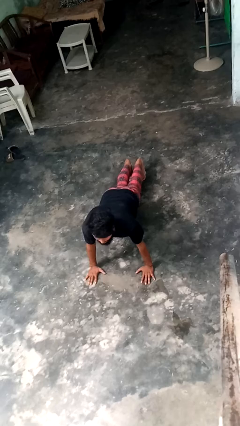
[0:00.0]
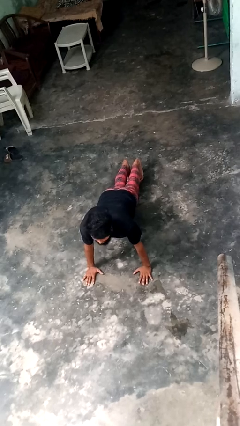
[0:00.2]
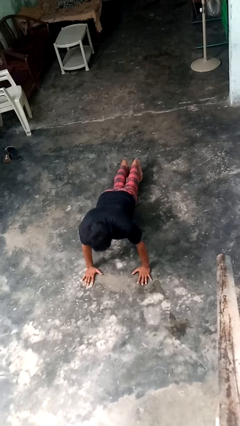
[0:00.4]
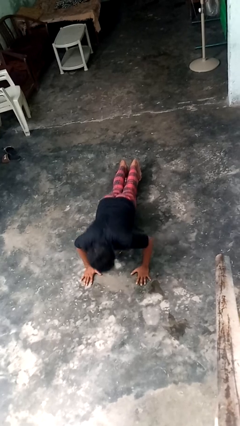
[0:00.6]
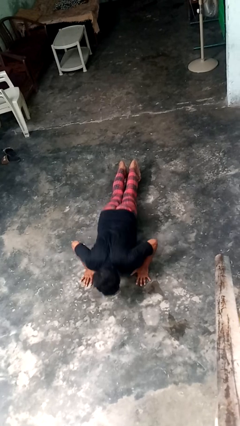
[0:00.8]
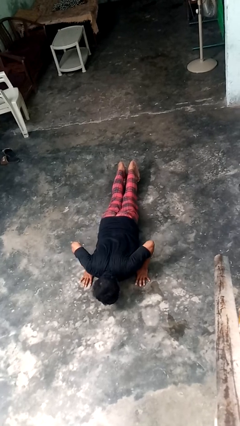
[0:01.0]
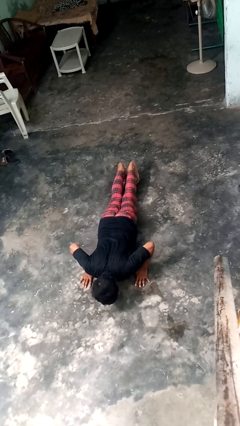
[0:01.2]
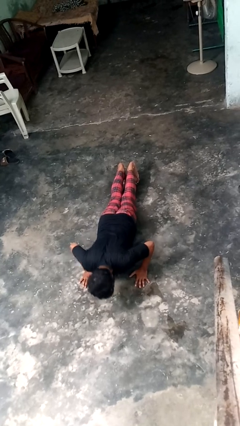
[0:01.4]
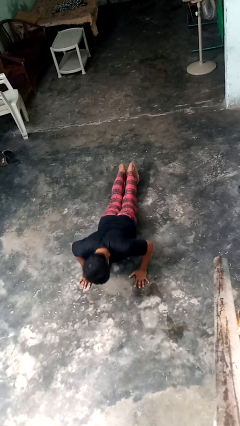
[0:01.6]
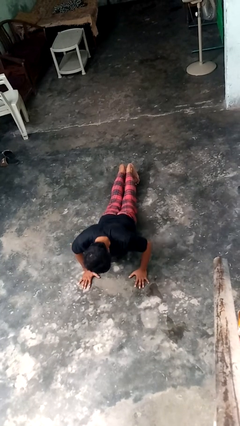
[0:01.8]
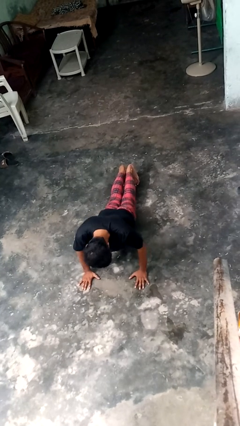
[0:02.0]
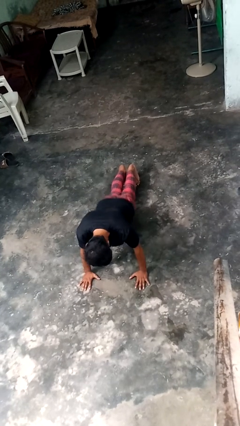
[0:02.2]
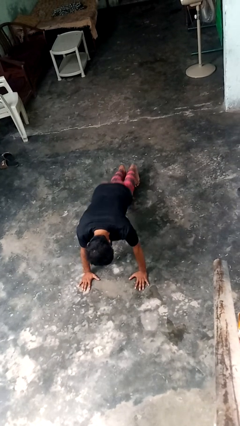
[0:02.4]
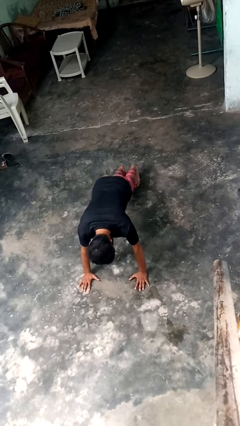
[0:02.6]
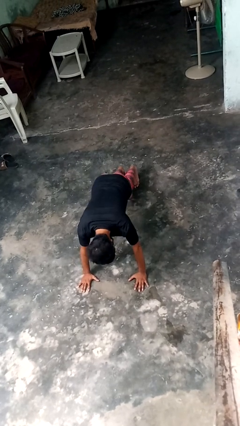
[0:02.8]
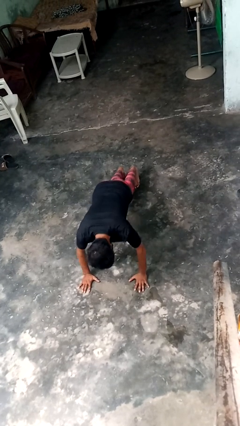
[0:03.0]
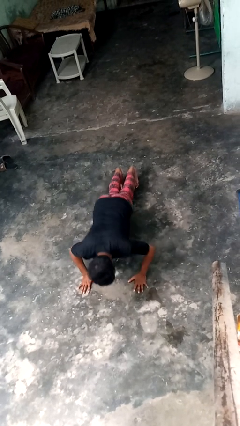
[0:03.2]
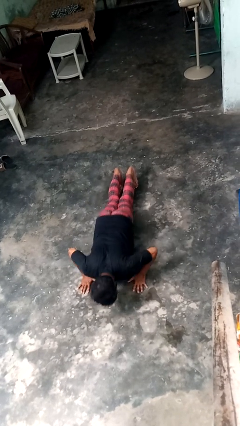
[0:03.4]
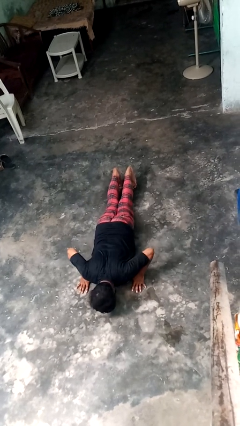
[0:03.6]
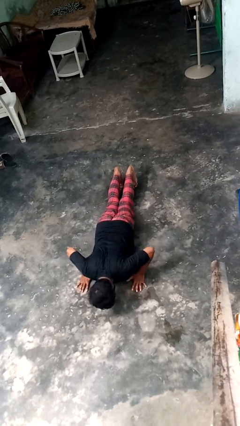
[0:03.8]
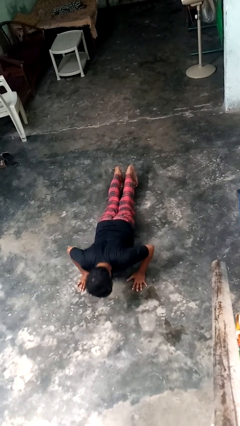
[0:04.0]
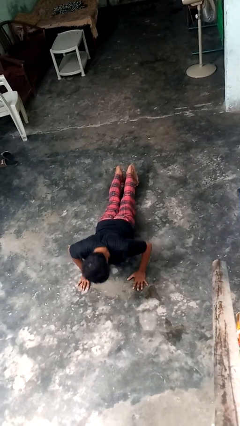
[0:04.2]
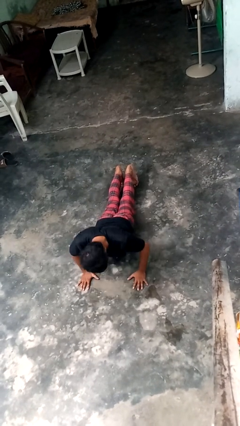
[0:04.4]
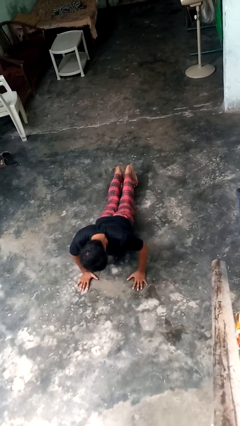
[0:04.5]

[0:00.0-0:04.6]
person exercises with pushup

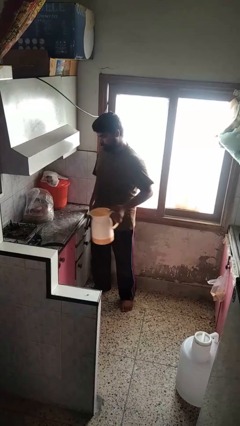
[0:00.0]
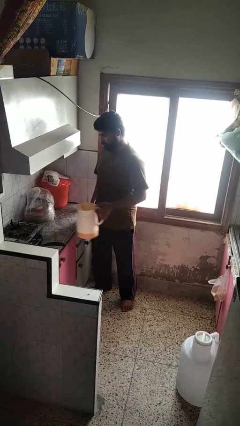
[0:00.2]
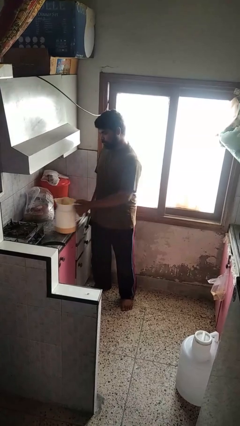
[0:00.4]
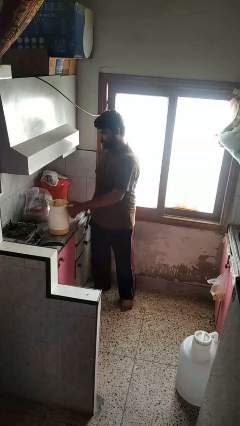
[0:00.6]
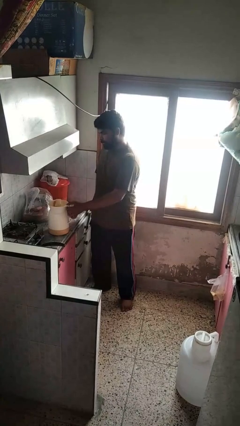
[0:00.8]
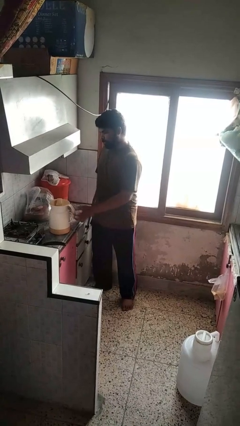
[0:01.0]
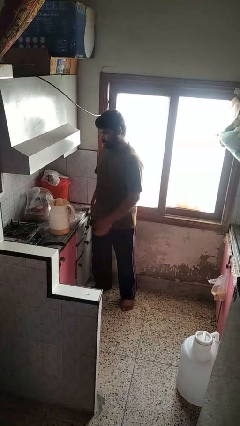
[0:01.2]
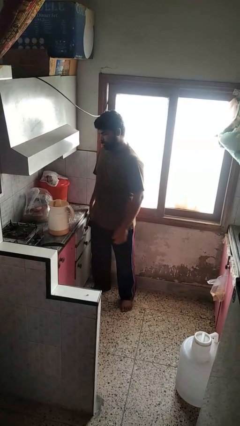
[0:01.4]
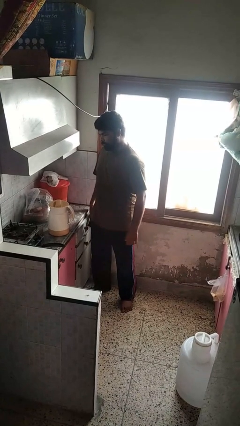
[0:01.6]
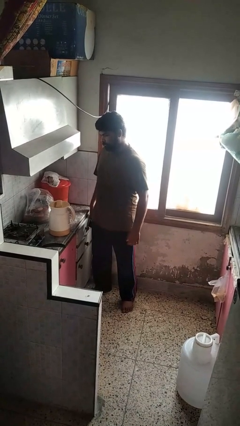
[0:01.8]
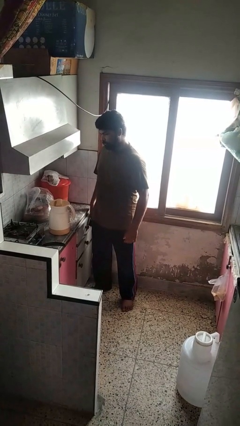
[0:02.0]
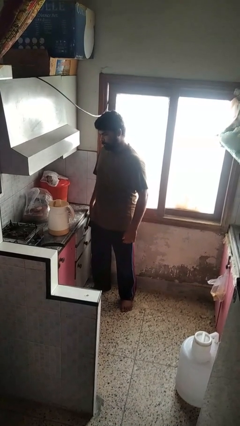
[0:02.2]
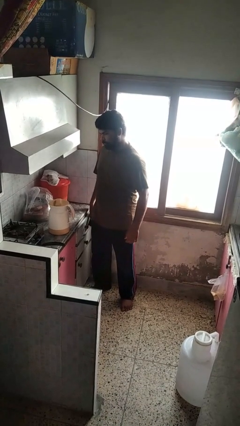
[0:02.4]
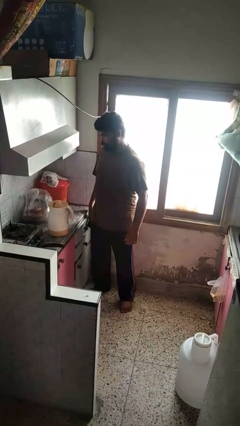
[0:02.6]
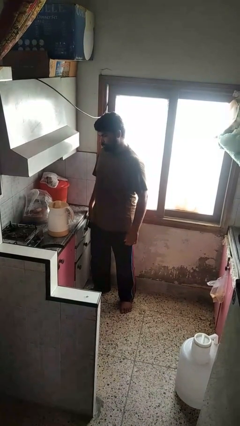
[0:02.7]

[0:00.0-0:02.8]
person puts down object on countertop

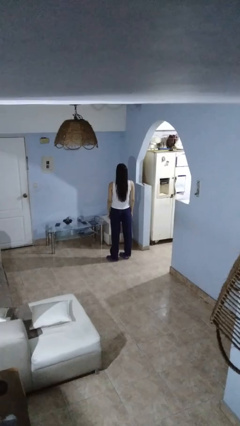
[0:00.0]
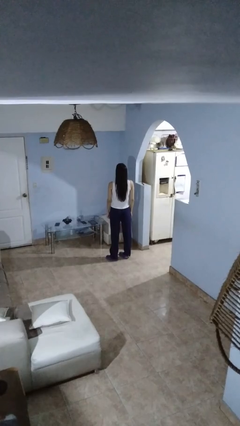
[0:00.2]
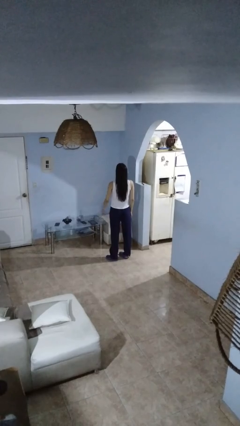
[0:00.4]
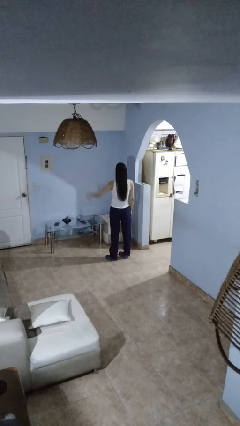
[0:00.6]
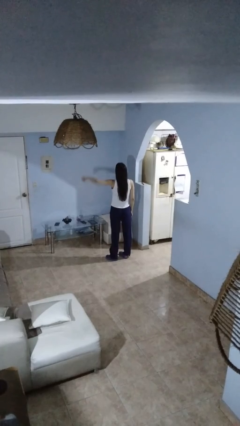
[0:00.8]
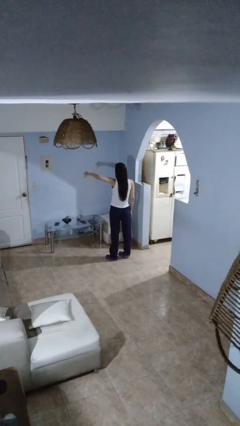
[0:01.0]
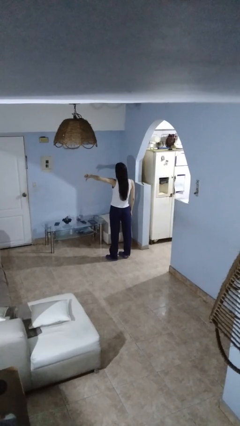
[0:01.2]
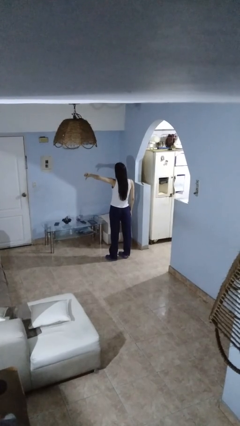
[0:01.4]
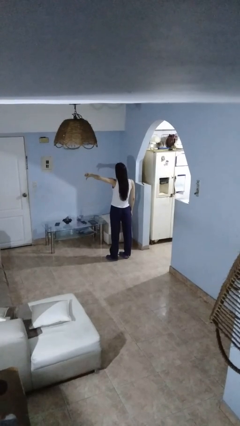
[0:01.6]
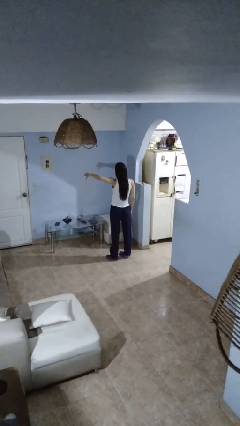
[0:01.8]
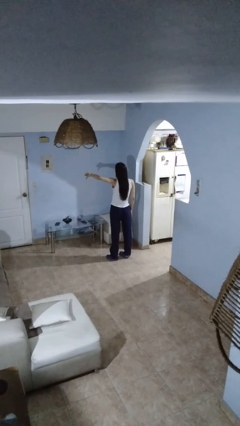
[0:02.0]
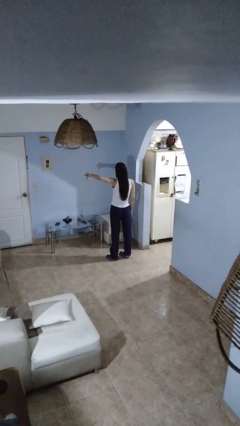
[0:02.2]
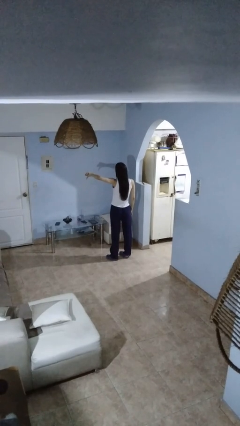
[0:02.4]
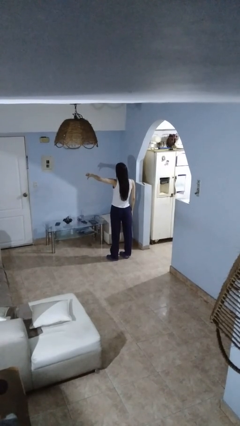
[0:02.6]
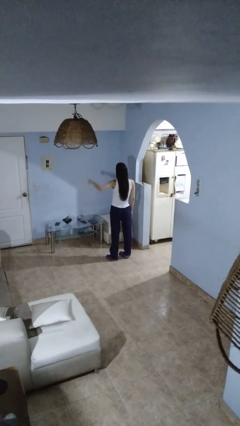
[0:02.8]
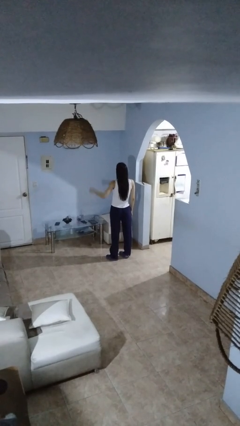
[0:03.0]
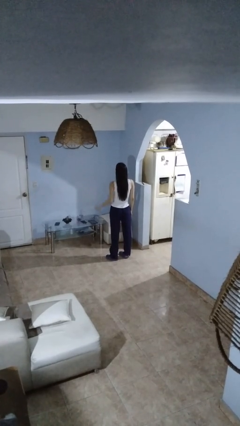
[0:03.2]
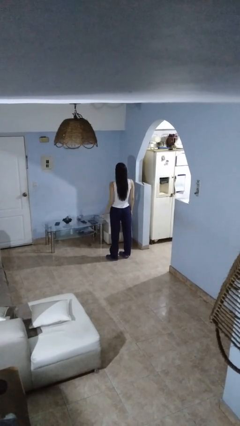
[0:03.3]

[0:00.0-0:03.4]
person gestures thumbs down

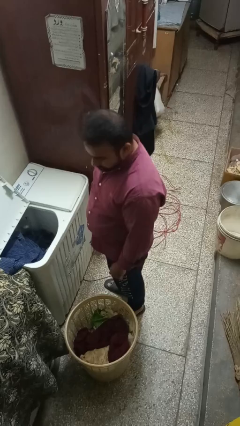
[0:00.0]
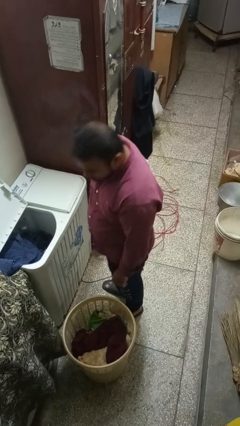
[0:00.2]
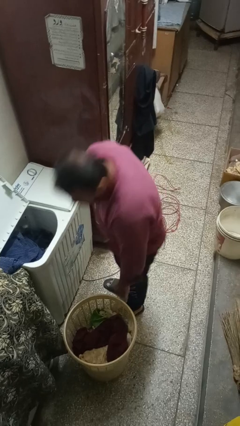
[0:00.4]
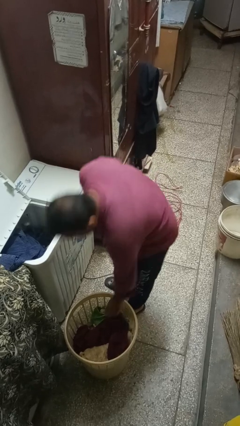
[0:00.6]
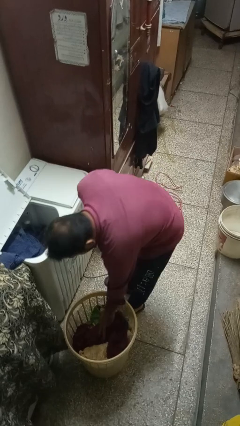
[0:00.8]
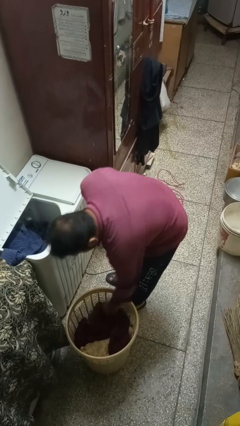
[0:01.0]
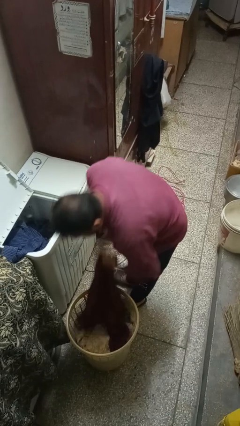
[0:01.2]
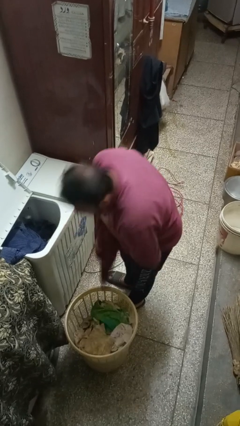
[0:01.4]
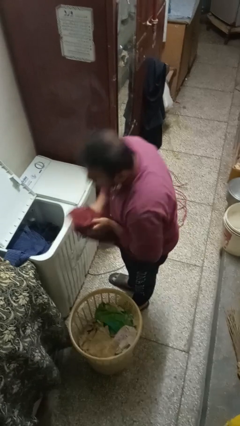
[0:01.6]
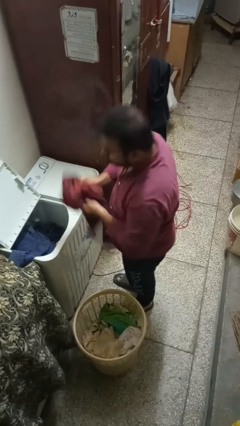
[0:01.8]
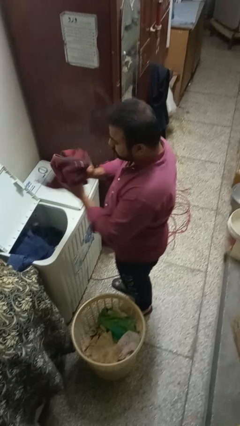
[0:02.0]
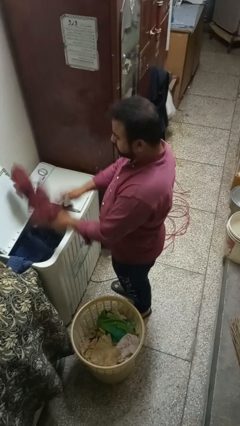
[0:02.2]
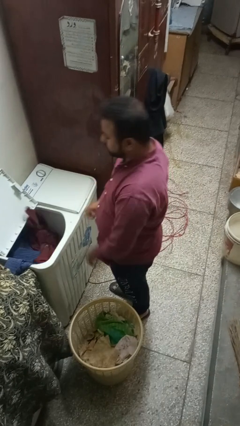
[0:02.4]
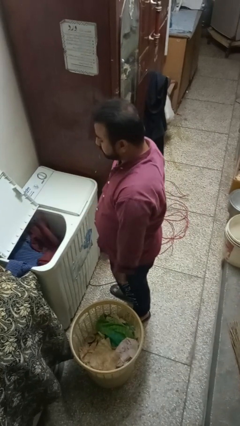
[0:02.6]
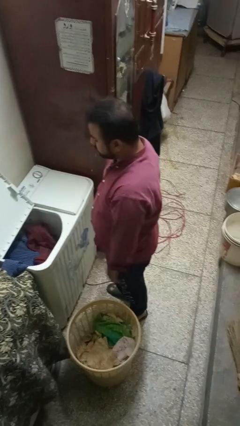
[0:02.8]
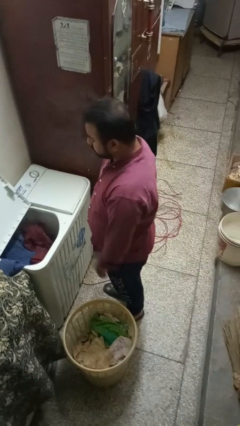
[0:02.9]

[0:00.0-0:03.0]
person loads clotheswasher

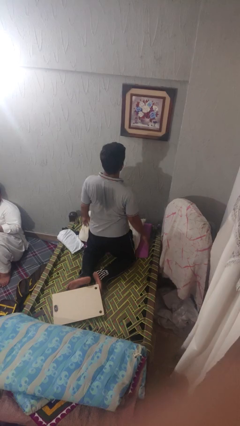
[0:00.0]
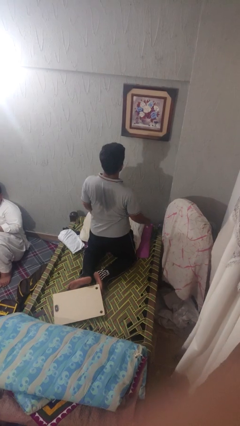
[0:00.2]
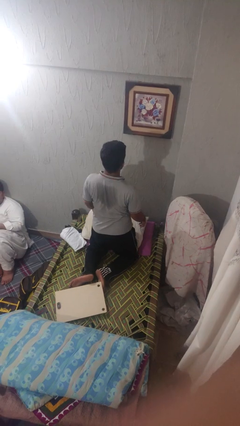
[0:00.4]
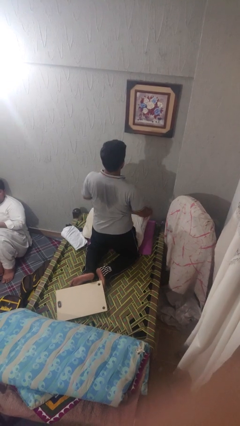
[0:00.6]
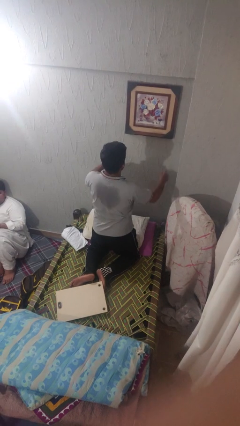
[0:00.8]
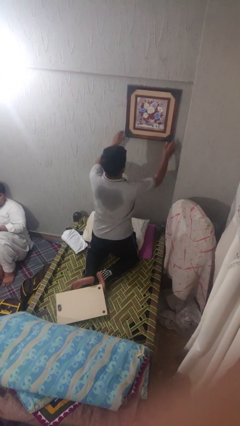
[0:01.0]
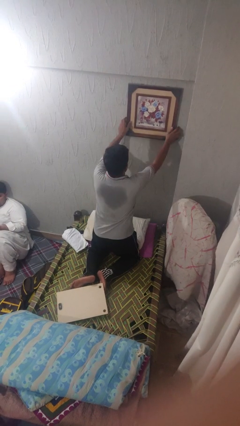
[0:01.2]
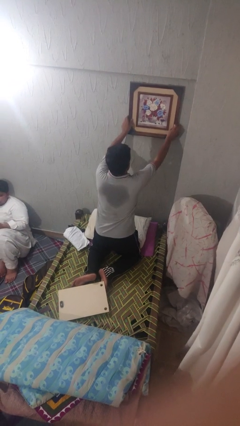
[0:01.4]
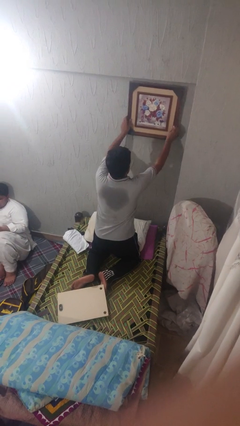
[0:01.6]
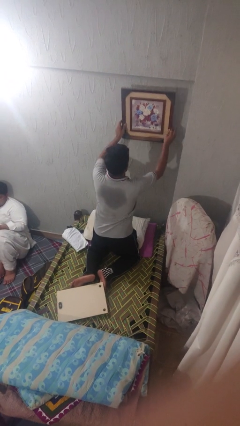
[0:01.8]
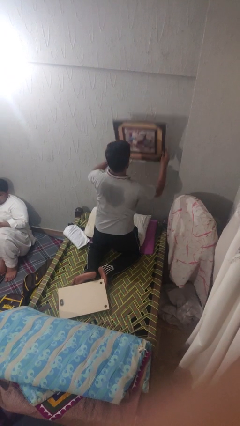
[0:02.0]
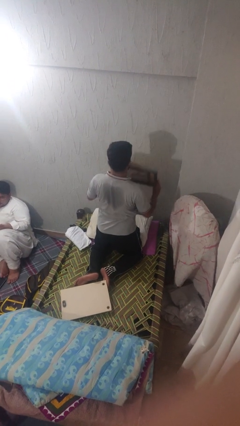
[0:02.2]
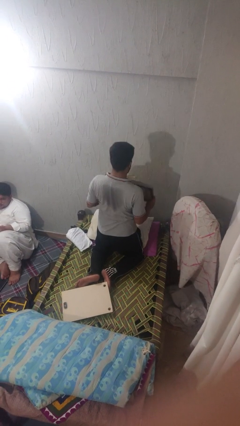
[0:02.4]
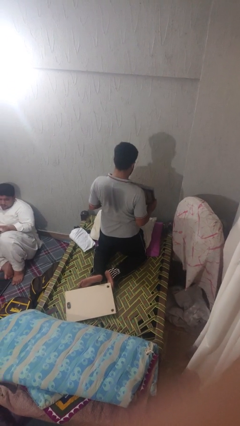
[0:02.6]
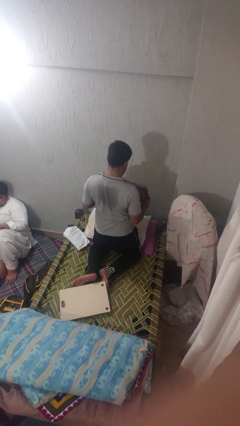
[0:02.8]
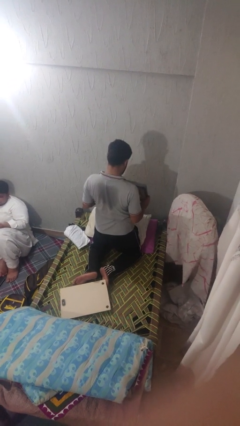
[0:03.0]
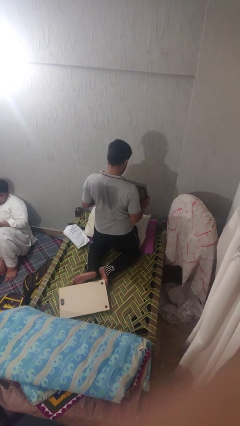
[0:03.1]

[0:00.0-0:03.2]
person takes down picture frame

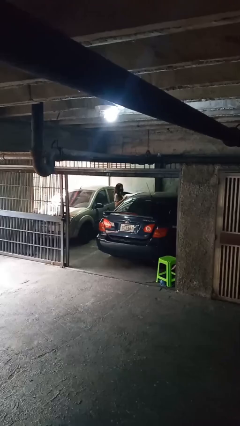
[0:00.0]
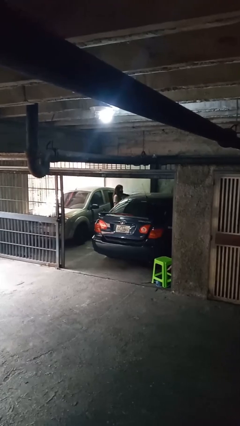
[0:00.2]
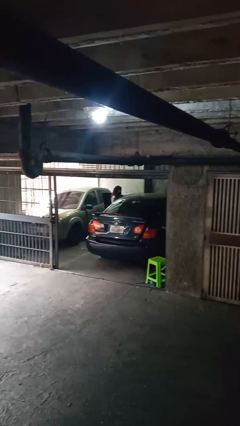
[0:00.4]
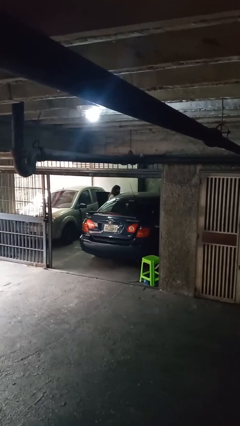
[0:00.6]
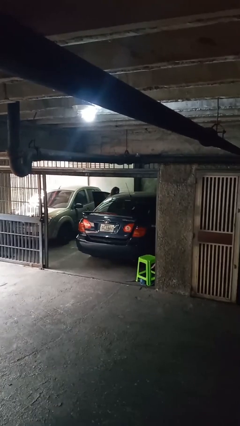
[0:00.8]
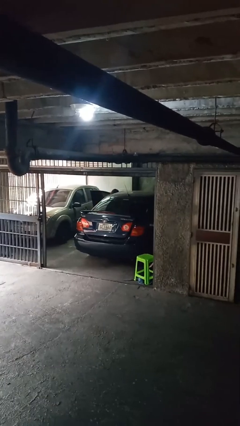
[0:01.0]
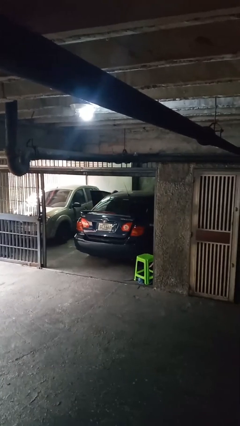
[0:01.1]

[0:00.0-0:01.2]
person loads car
